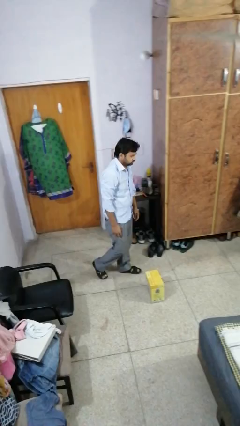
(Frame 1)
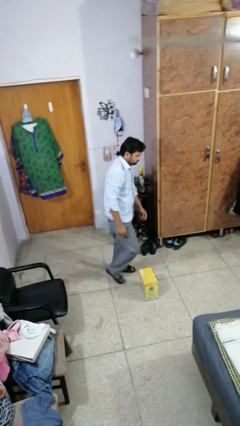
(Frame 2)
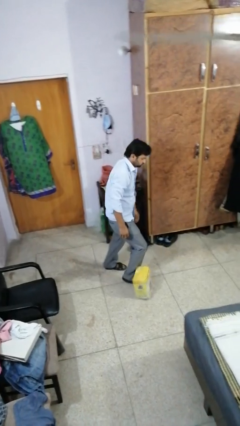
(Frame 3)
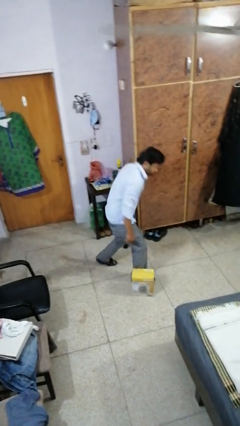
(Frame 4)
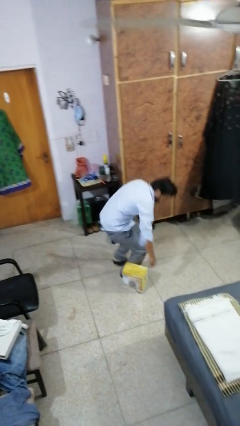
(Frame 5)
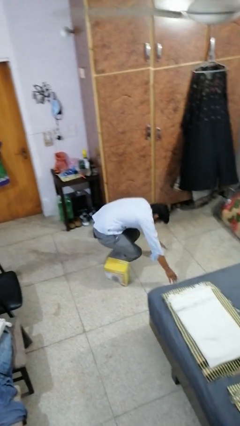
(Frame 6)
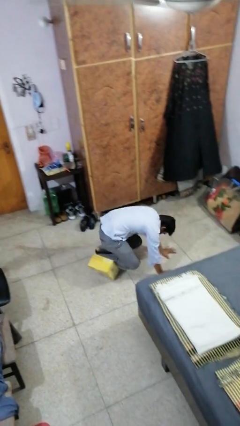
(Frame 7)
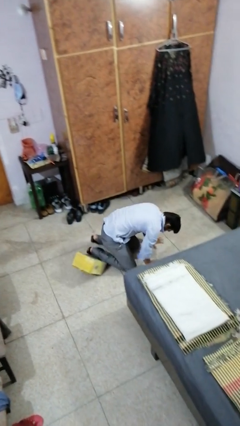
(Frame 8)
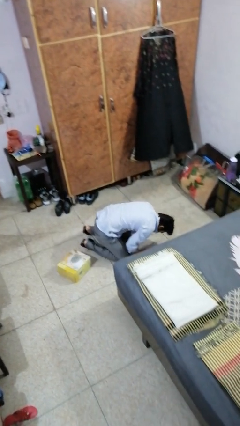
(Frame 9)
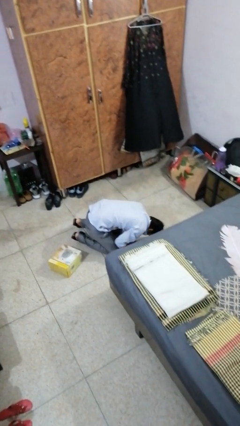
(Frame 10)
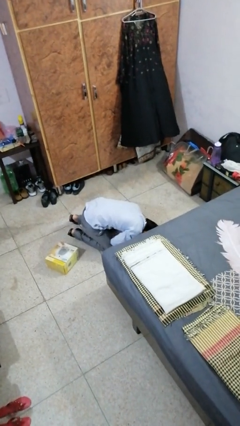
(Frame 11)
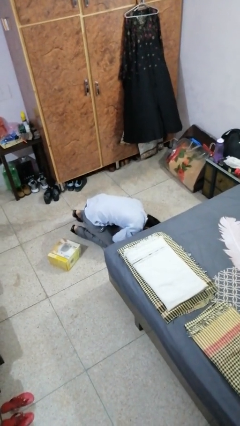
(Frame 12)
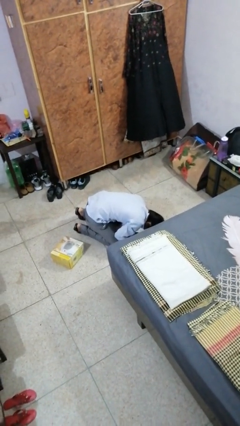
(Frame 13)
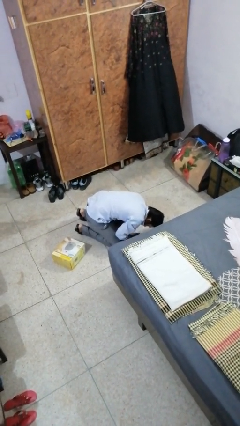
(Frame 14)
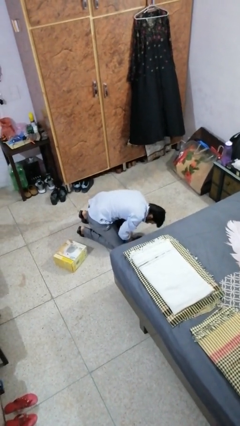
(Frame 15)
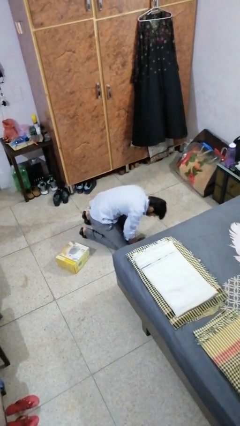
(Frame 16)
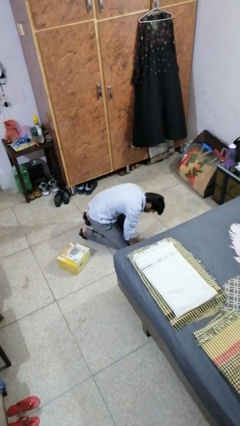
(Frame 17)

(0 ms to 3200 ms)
person trips on object on floor

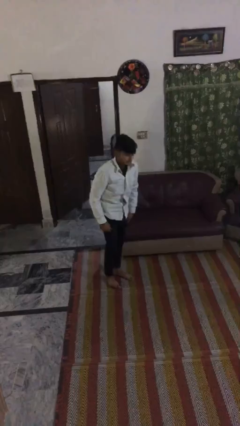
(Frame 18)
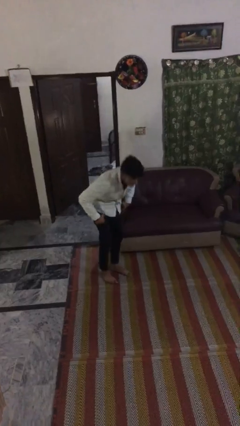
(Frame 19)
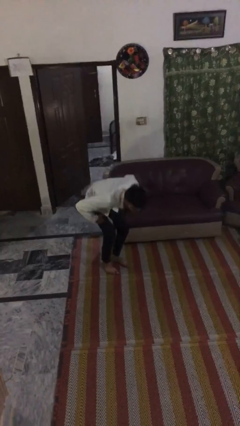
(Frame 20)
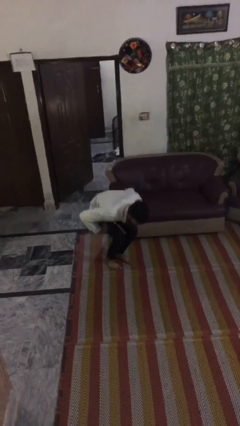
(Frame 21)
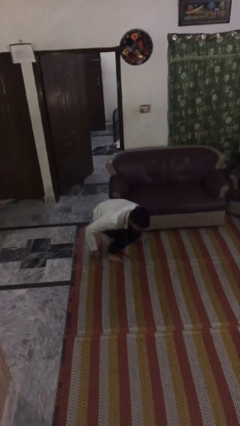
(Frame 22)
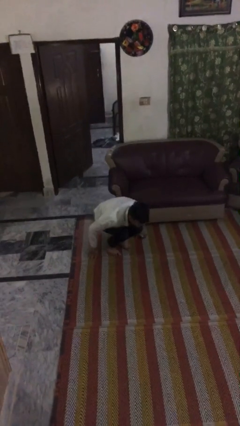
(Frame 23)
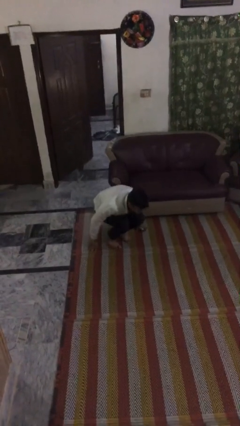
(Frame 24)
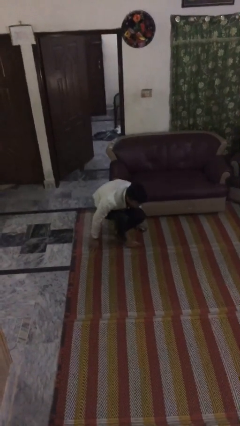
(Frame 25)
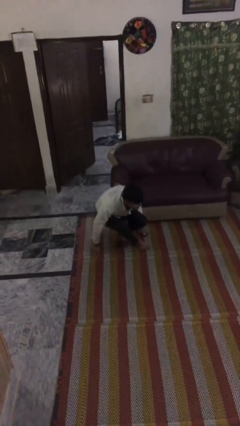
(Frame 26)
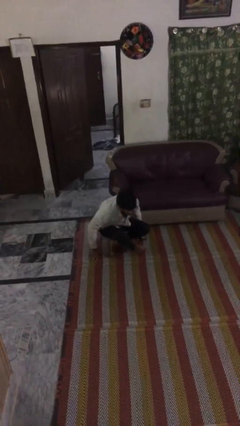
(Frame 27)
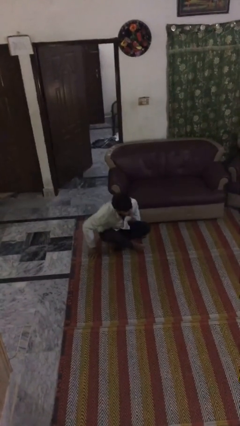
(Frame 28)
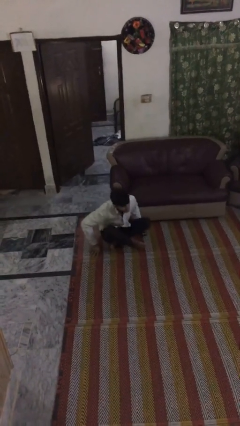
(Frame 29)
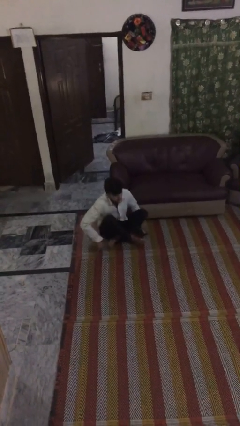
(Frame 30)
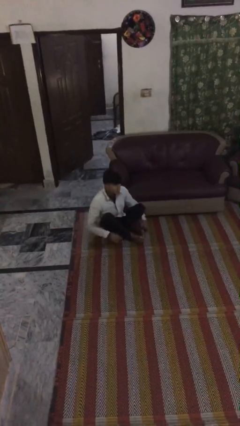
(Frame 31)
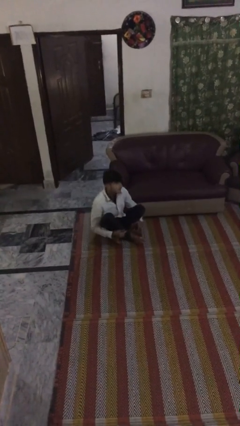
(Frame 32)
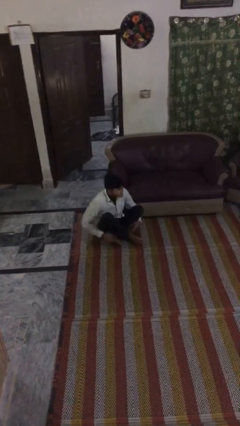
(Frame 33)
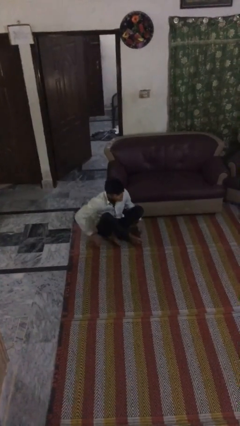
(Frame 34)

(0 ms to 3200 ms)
person sits down

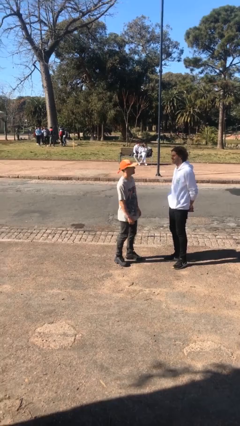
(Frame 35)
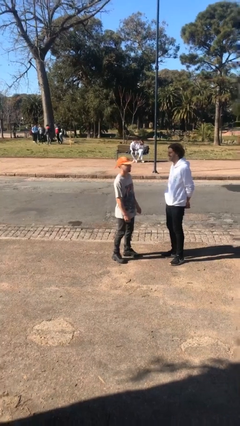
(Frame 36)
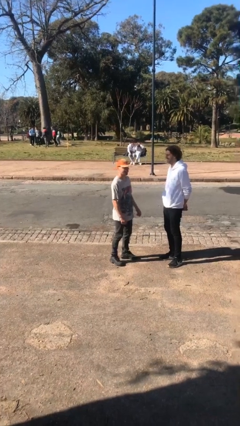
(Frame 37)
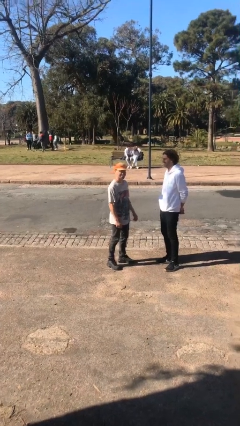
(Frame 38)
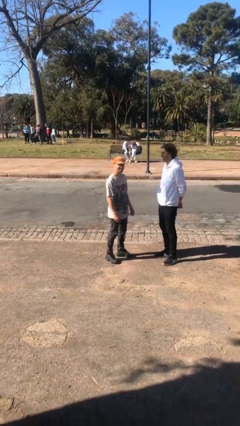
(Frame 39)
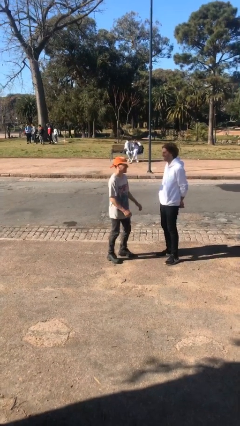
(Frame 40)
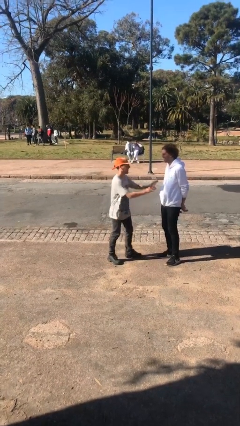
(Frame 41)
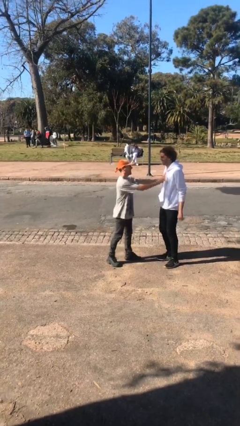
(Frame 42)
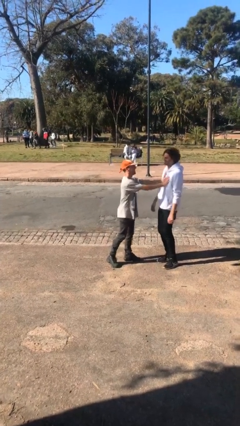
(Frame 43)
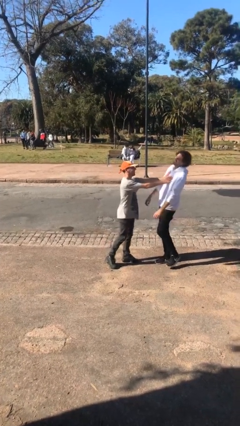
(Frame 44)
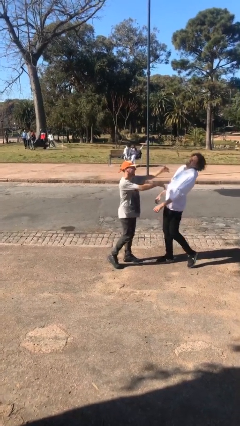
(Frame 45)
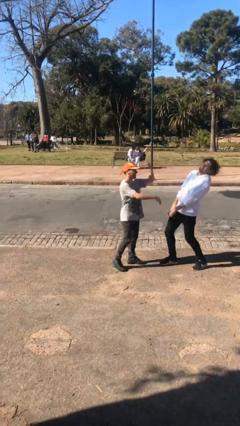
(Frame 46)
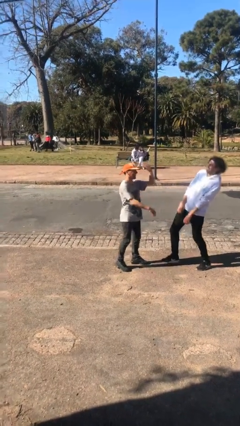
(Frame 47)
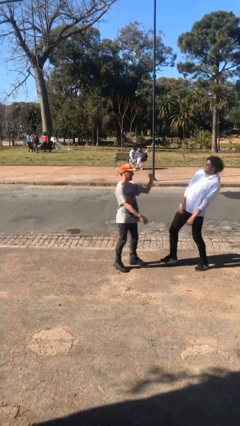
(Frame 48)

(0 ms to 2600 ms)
person shoves person

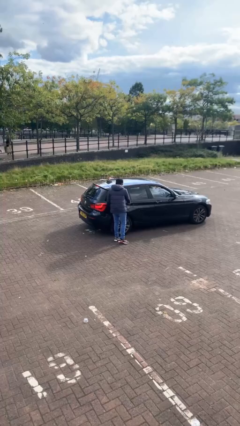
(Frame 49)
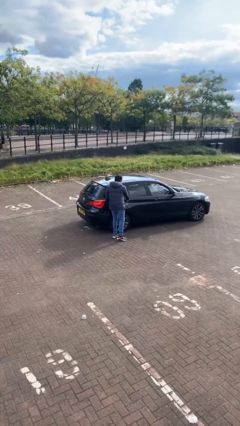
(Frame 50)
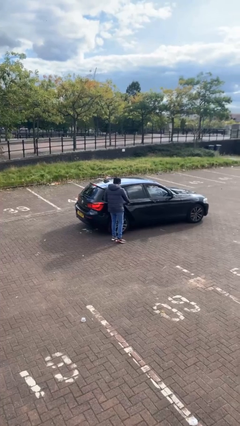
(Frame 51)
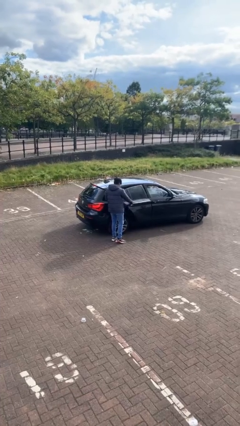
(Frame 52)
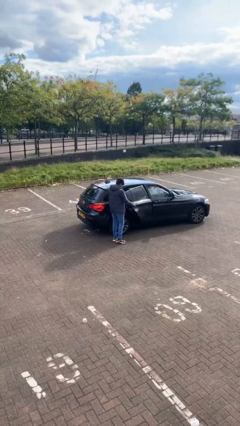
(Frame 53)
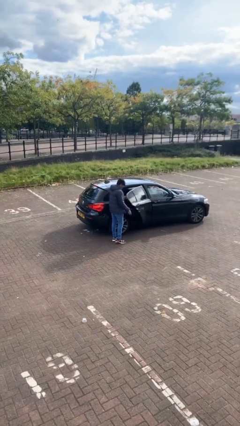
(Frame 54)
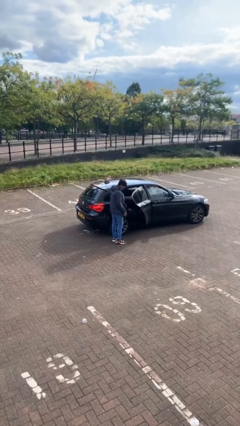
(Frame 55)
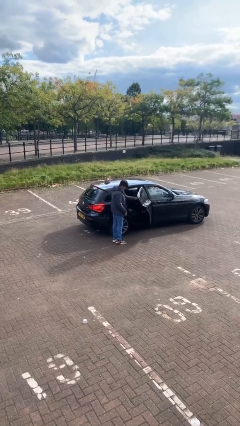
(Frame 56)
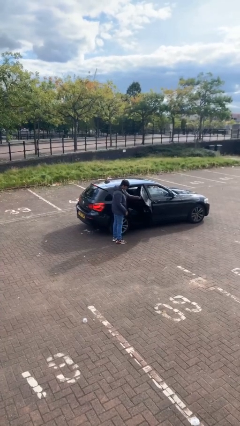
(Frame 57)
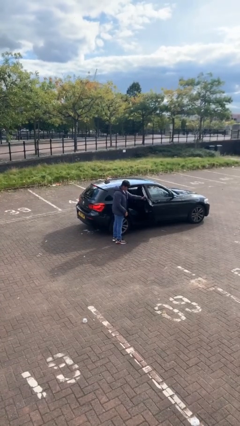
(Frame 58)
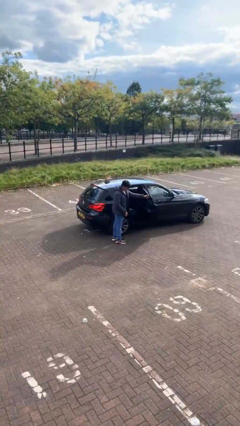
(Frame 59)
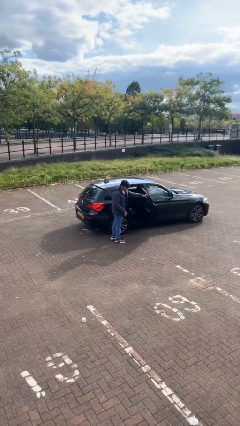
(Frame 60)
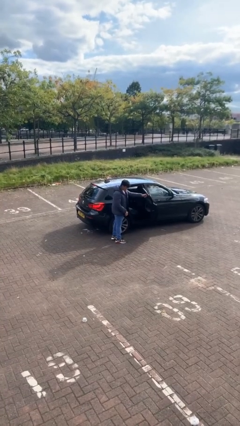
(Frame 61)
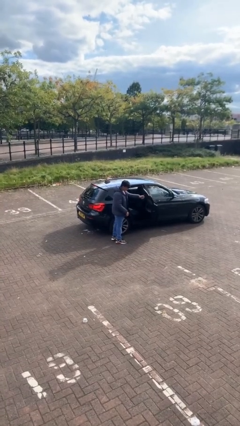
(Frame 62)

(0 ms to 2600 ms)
person opens car door

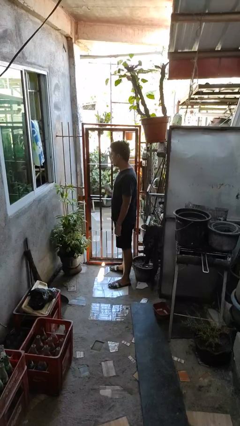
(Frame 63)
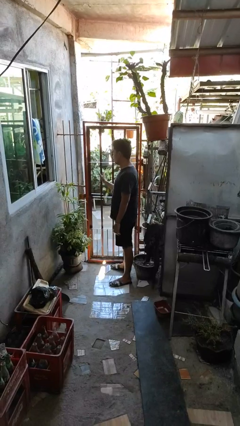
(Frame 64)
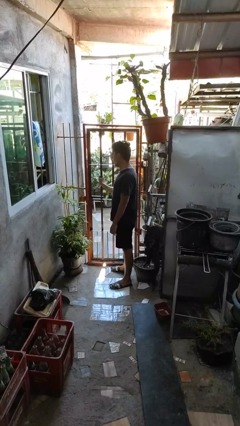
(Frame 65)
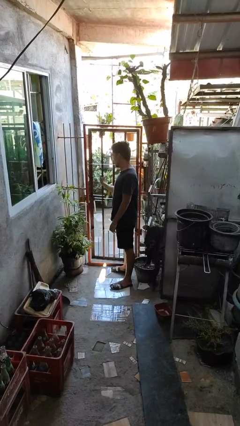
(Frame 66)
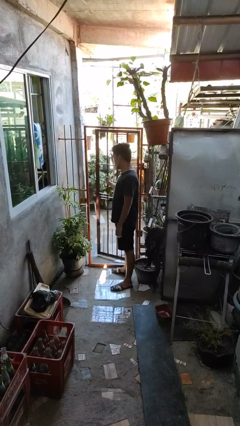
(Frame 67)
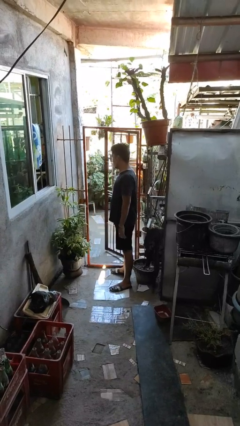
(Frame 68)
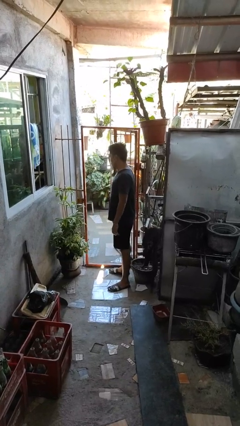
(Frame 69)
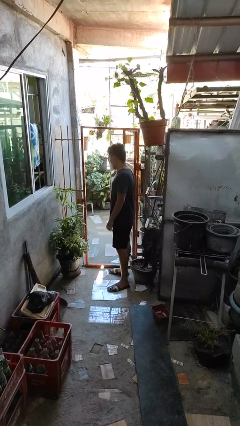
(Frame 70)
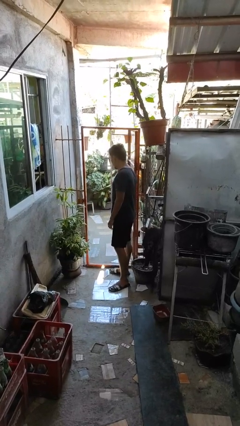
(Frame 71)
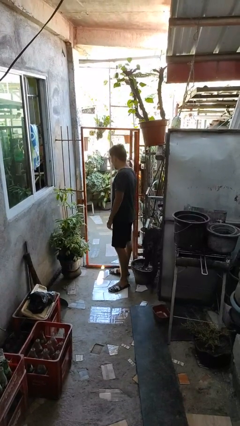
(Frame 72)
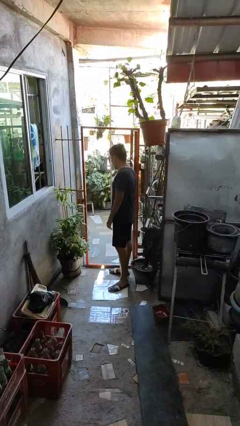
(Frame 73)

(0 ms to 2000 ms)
person opens gate

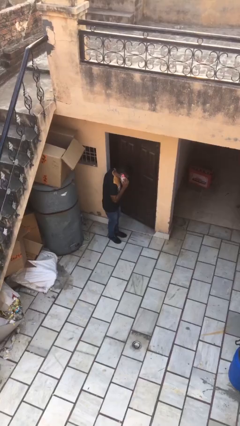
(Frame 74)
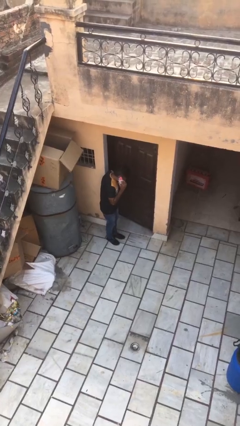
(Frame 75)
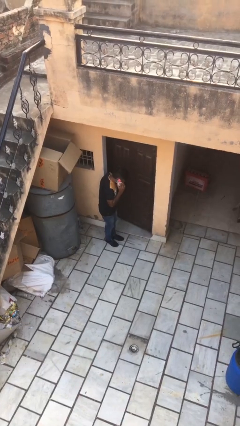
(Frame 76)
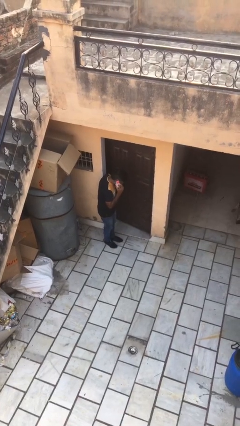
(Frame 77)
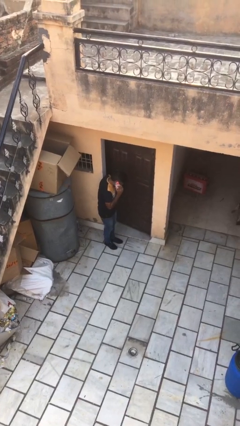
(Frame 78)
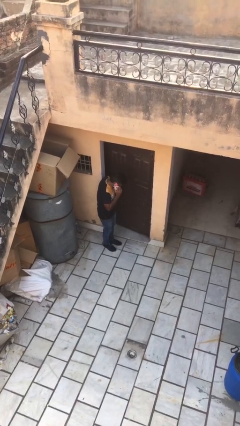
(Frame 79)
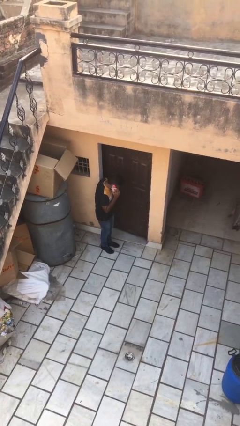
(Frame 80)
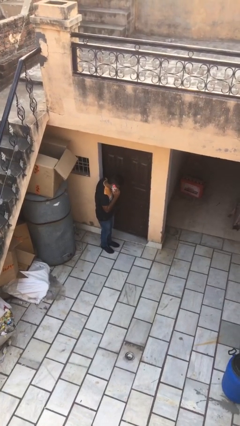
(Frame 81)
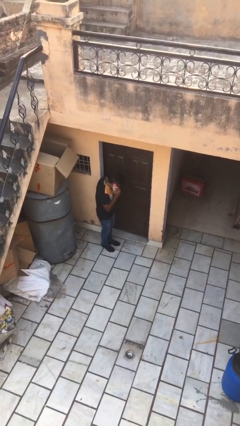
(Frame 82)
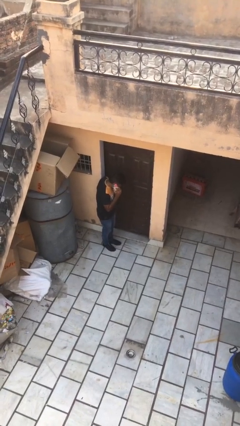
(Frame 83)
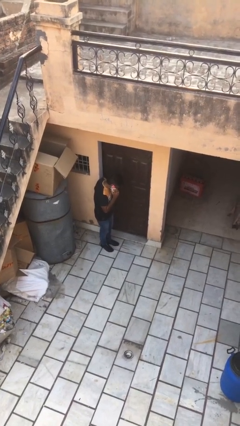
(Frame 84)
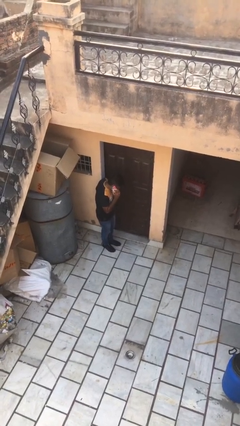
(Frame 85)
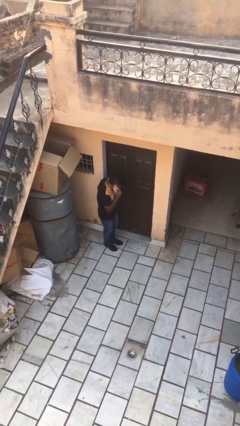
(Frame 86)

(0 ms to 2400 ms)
person closes facility door

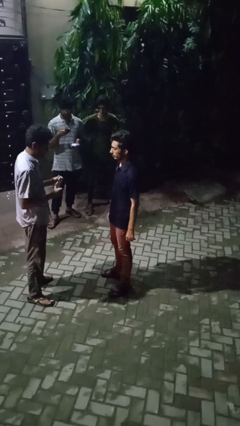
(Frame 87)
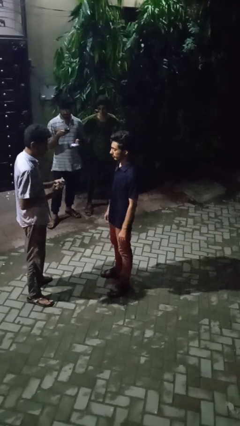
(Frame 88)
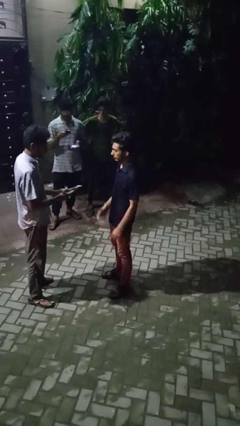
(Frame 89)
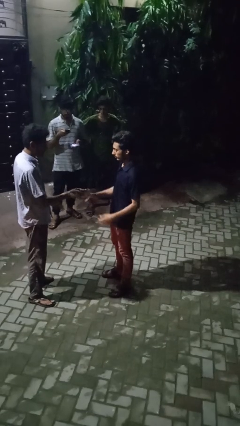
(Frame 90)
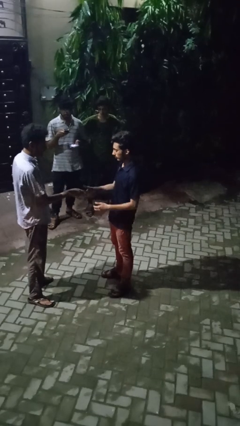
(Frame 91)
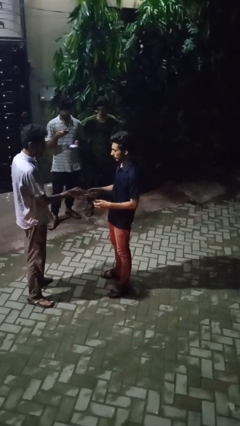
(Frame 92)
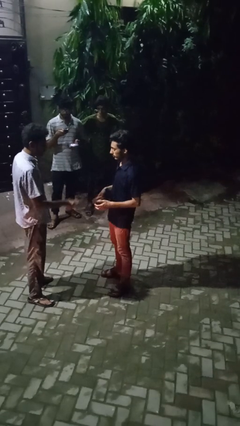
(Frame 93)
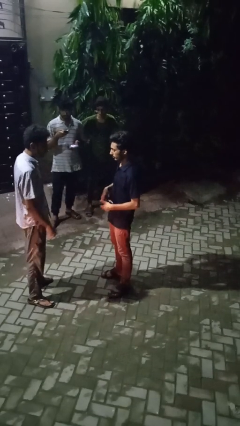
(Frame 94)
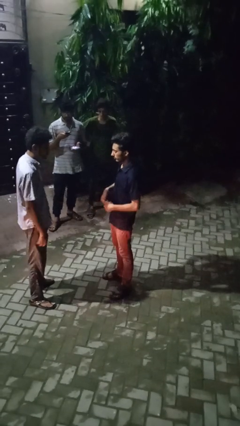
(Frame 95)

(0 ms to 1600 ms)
person transfers object to person
